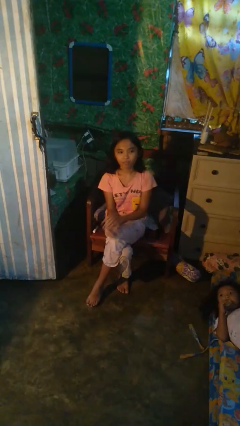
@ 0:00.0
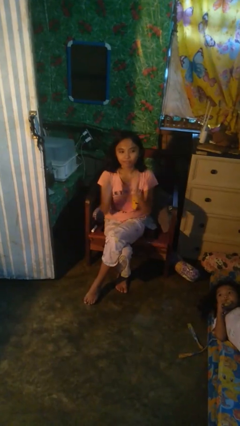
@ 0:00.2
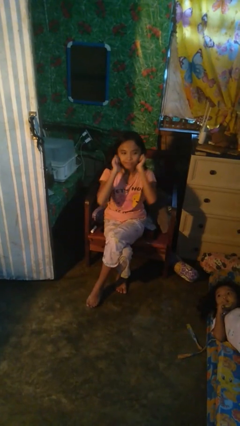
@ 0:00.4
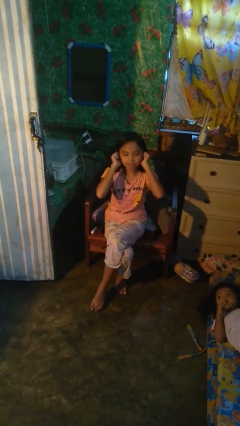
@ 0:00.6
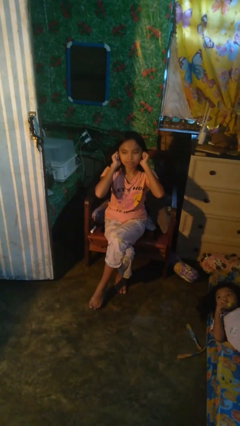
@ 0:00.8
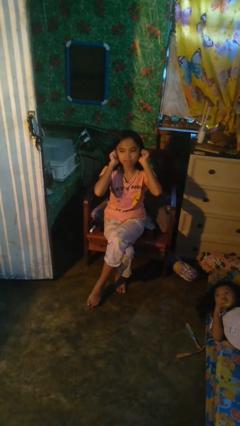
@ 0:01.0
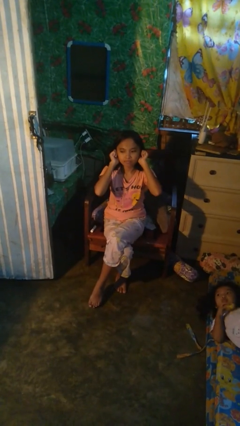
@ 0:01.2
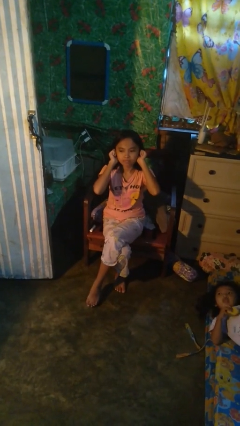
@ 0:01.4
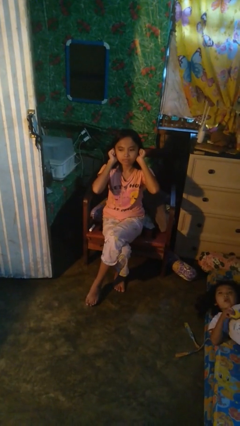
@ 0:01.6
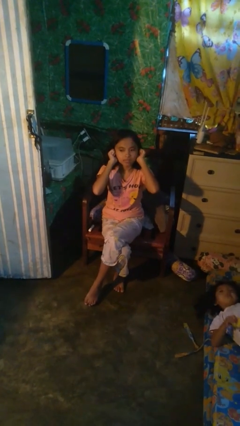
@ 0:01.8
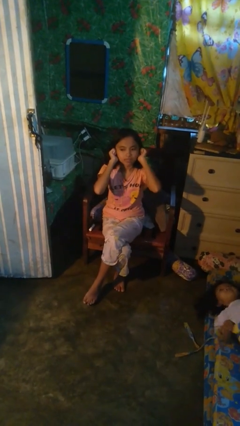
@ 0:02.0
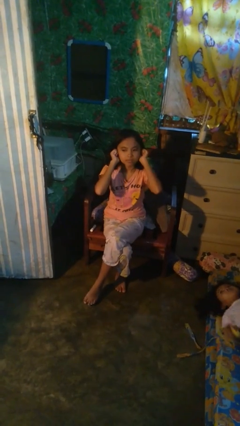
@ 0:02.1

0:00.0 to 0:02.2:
person puts fingers in ear

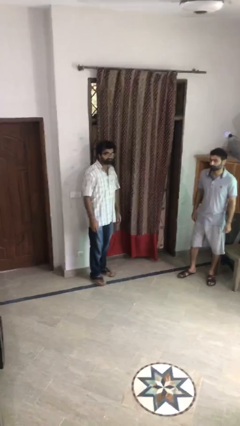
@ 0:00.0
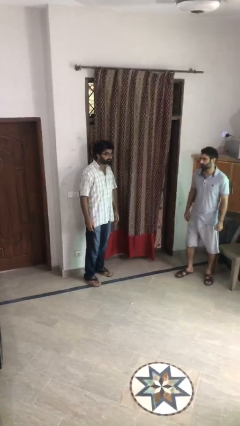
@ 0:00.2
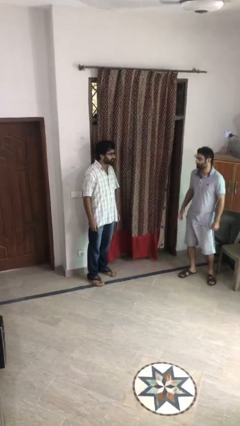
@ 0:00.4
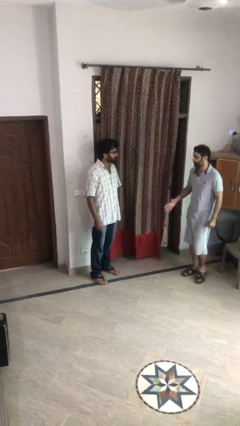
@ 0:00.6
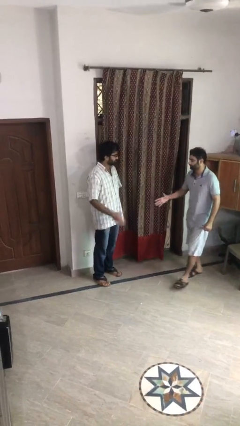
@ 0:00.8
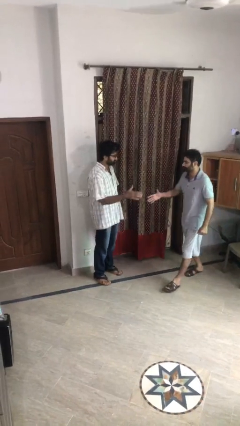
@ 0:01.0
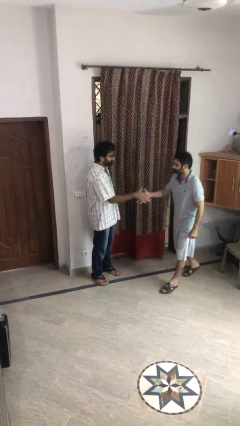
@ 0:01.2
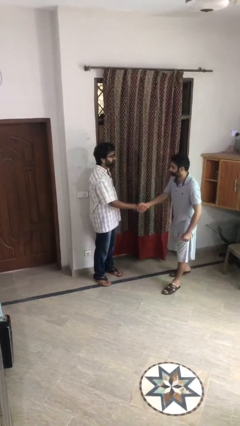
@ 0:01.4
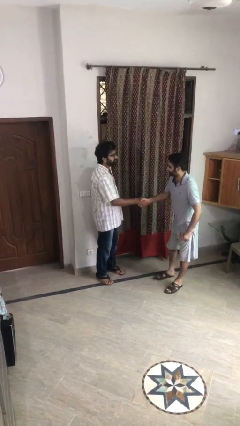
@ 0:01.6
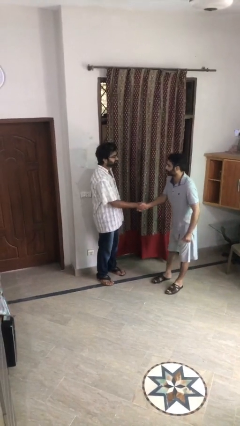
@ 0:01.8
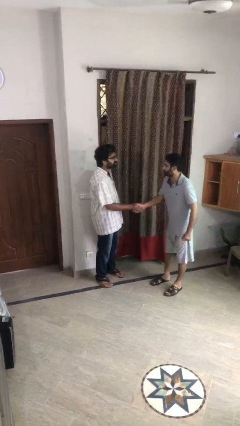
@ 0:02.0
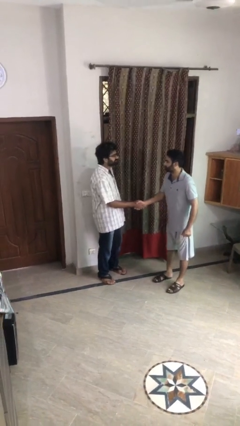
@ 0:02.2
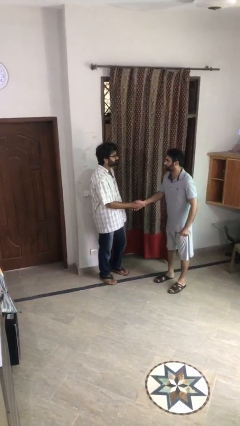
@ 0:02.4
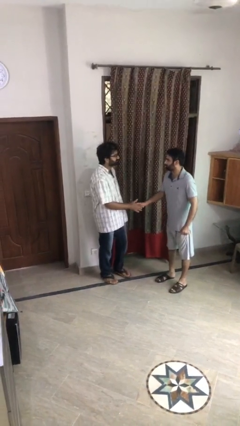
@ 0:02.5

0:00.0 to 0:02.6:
person shakes hand

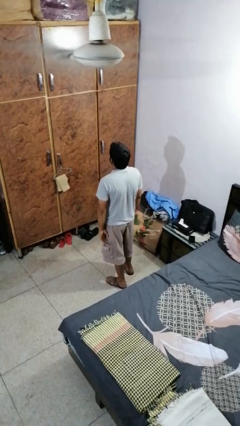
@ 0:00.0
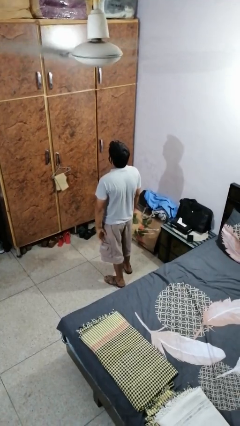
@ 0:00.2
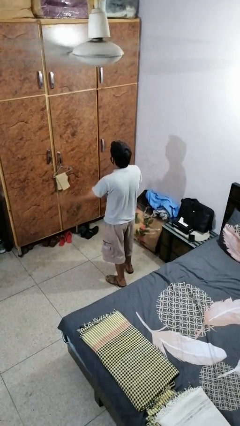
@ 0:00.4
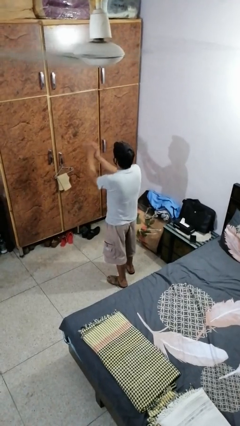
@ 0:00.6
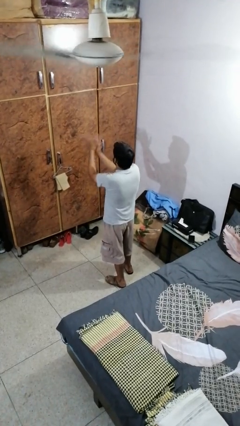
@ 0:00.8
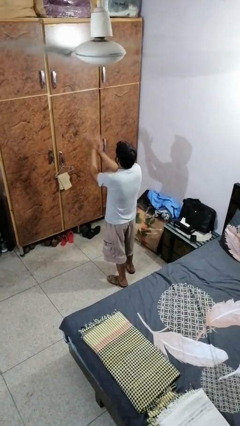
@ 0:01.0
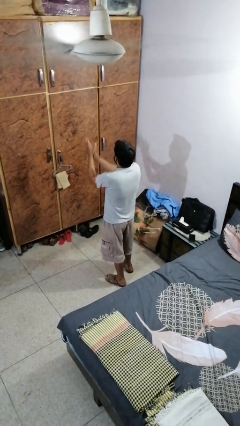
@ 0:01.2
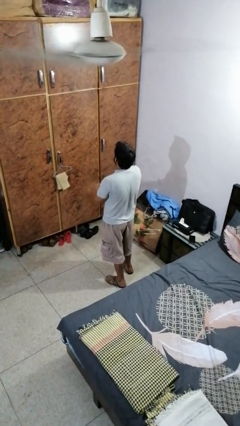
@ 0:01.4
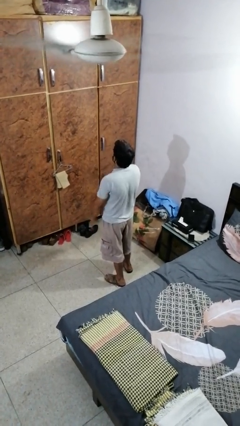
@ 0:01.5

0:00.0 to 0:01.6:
person claps hands

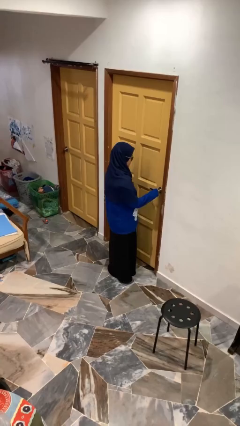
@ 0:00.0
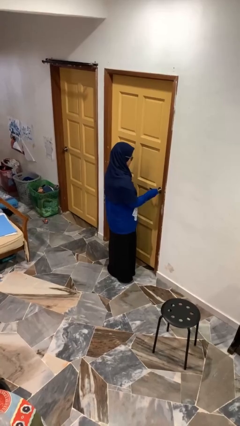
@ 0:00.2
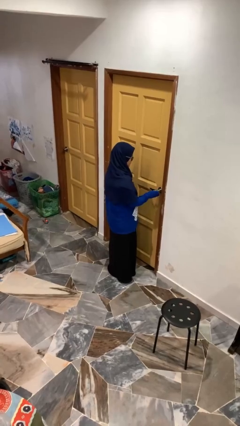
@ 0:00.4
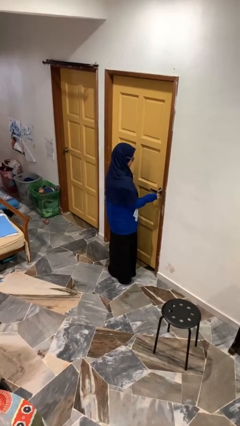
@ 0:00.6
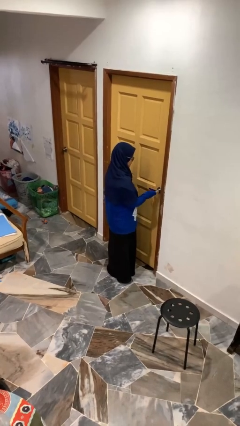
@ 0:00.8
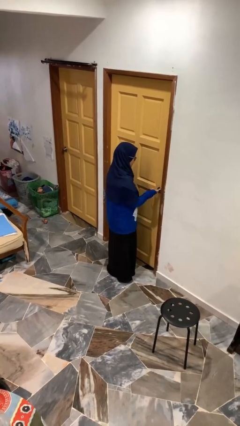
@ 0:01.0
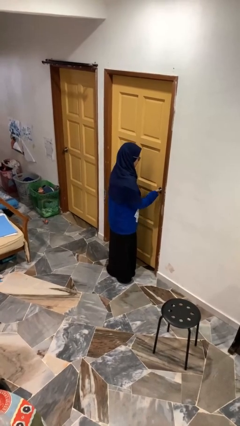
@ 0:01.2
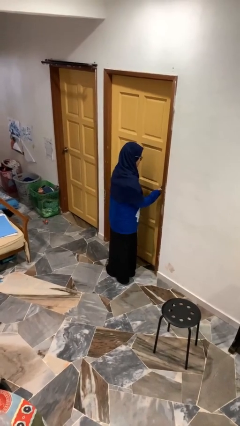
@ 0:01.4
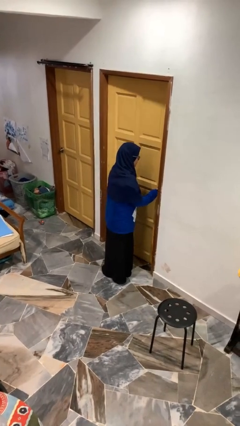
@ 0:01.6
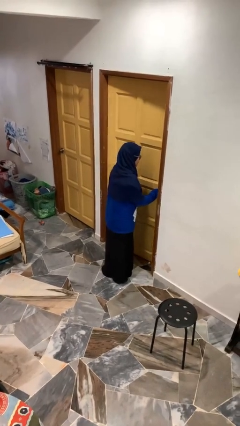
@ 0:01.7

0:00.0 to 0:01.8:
person unlocks door with keys

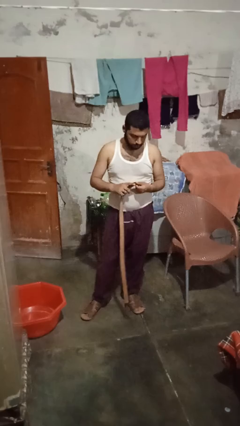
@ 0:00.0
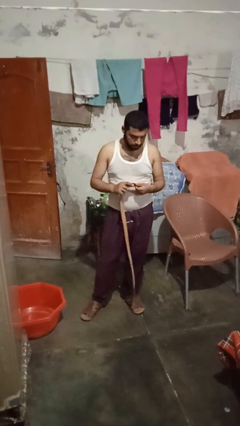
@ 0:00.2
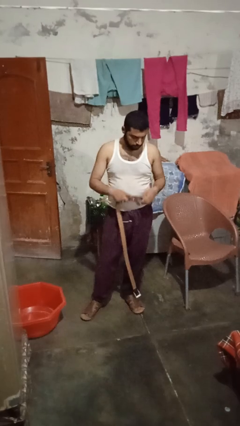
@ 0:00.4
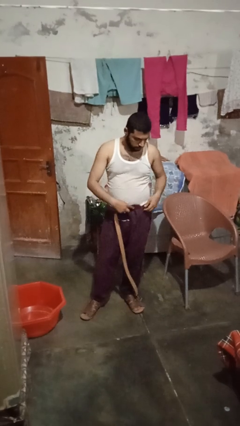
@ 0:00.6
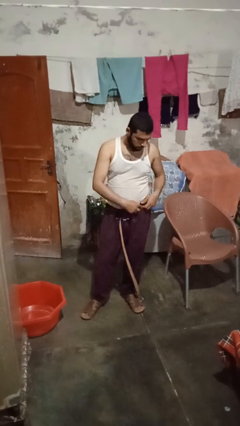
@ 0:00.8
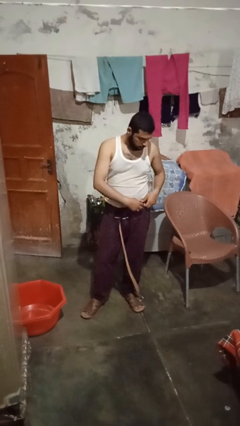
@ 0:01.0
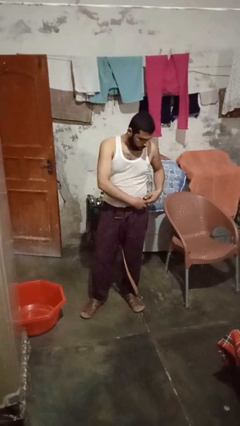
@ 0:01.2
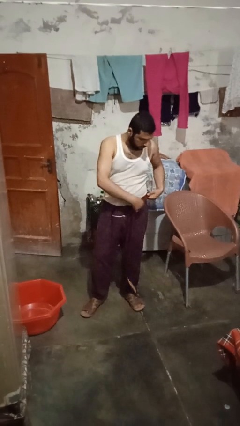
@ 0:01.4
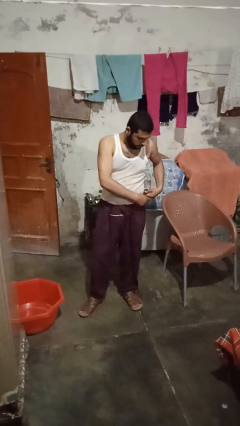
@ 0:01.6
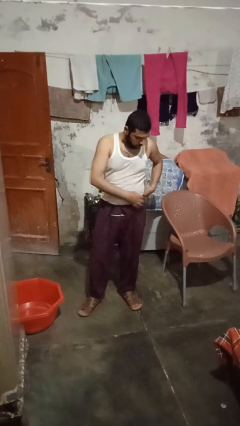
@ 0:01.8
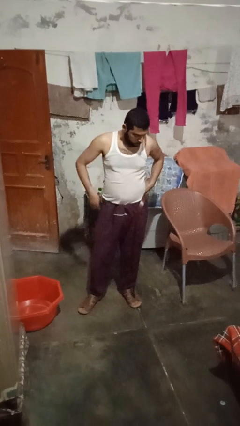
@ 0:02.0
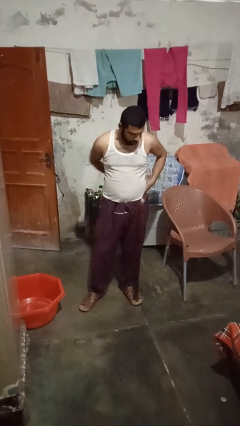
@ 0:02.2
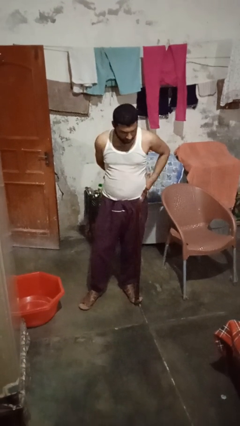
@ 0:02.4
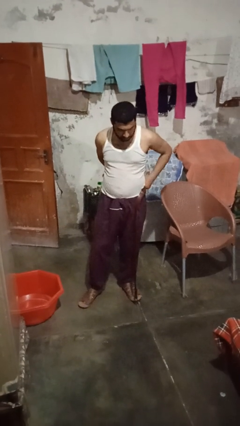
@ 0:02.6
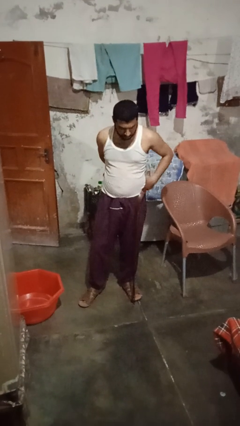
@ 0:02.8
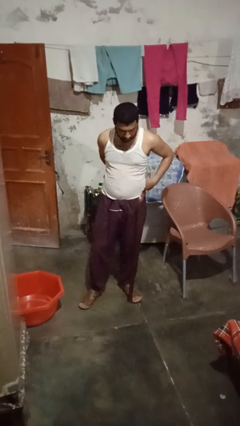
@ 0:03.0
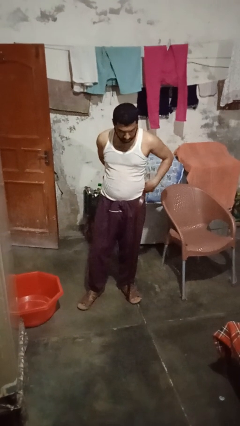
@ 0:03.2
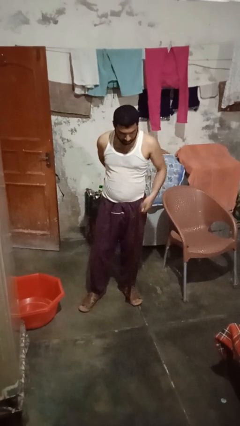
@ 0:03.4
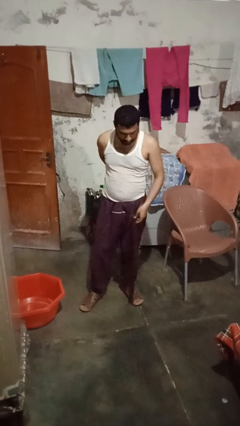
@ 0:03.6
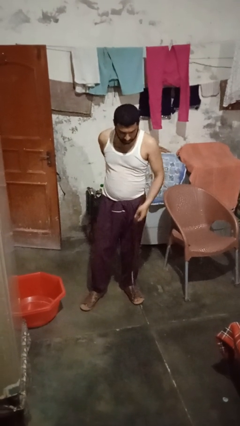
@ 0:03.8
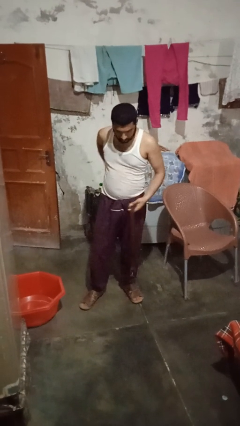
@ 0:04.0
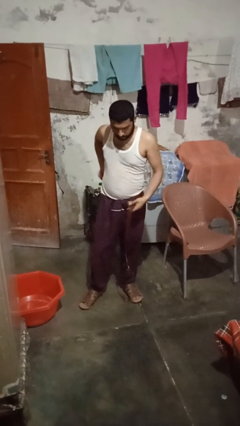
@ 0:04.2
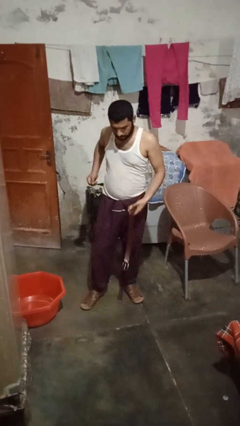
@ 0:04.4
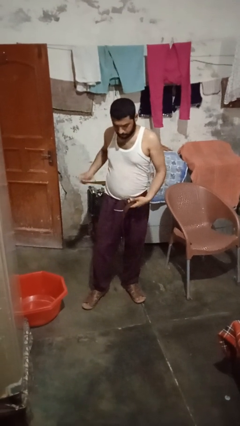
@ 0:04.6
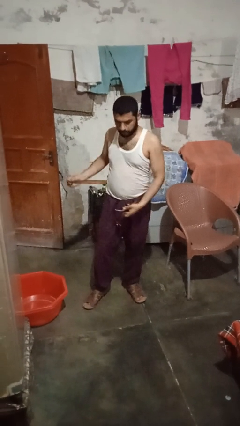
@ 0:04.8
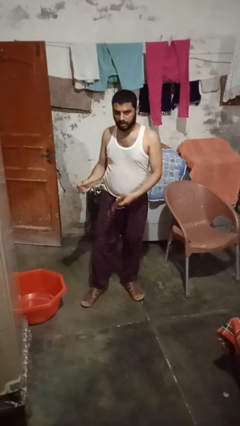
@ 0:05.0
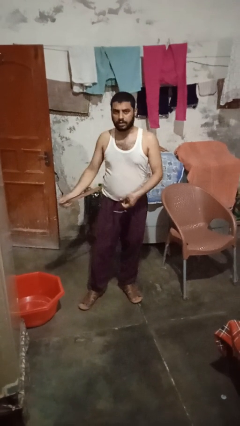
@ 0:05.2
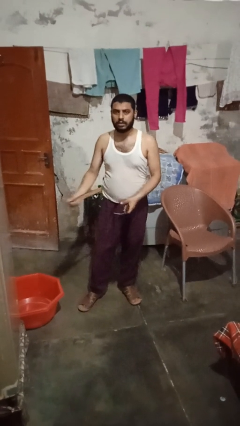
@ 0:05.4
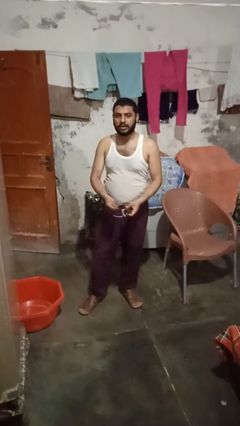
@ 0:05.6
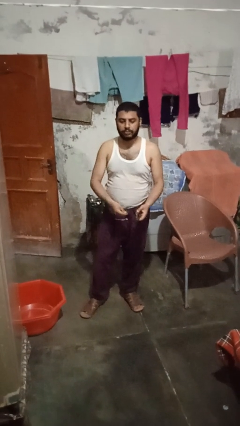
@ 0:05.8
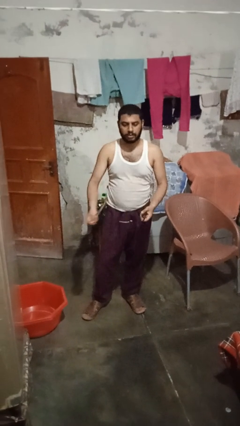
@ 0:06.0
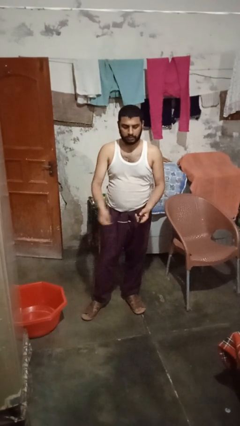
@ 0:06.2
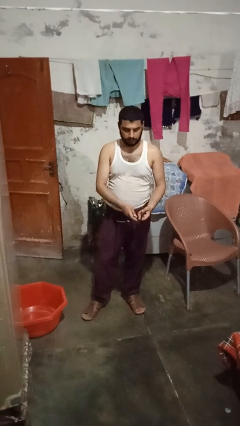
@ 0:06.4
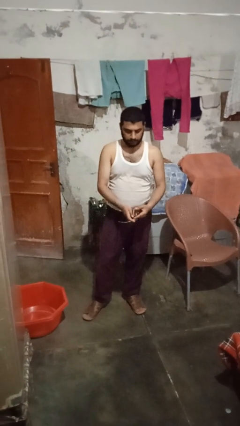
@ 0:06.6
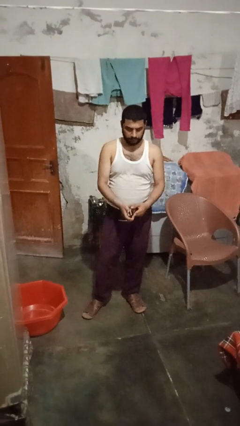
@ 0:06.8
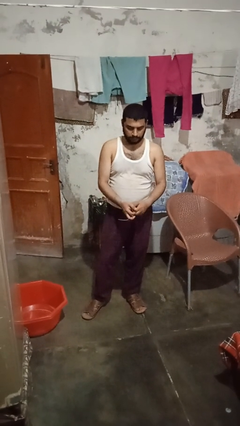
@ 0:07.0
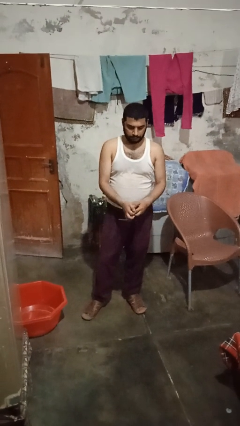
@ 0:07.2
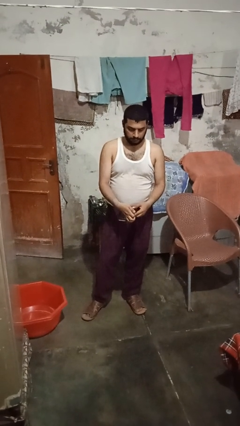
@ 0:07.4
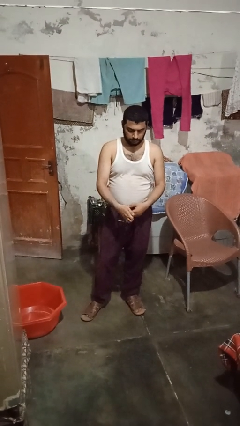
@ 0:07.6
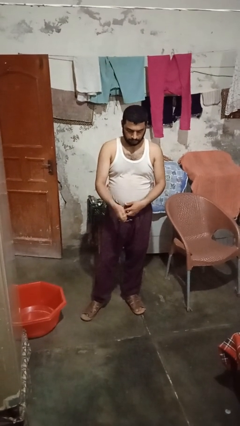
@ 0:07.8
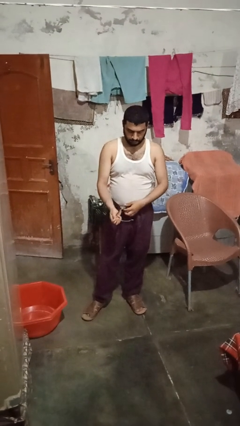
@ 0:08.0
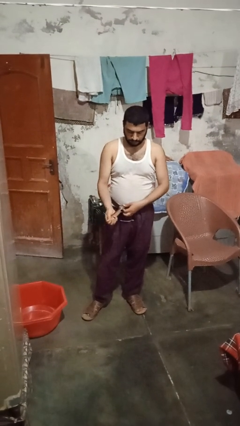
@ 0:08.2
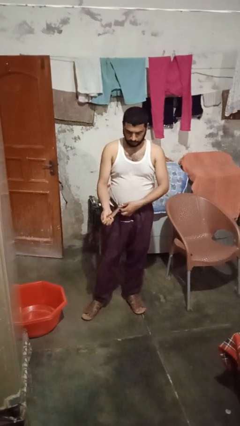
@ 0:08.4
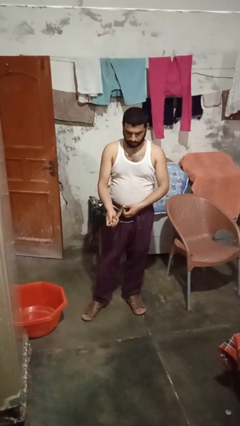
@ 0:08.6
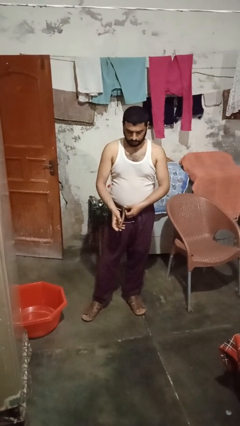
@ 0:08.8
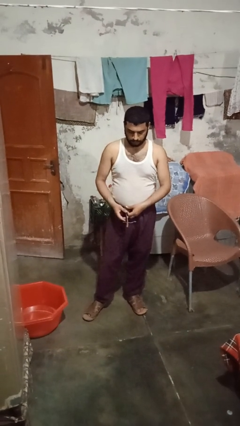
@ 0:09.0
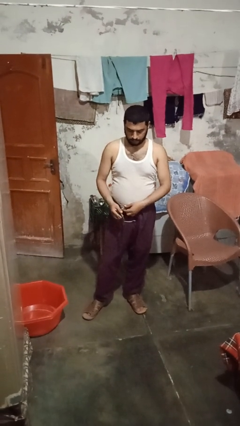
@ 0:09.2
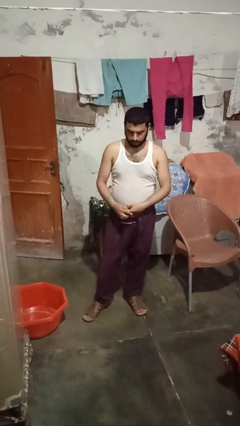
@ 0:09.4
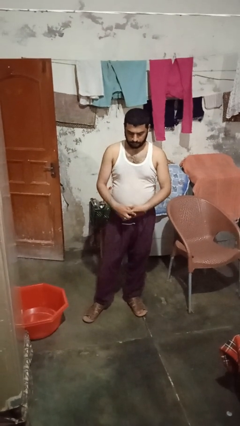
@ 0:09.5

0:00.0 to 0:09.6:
person puts on belt
